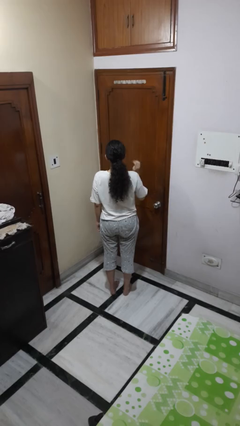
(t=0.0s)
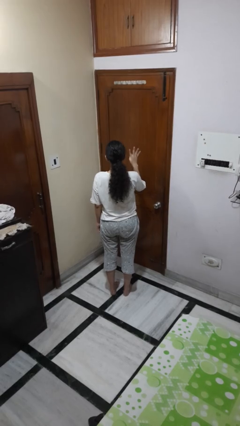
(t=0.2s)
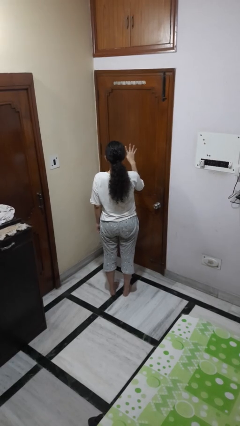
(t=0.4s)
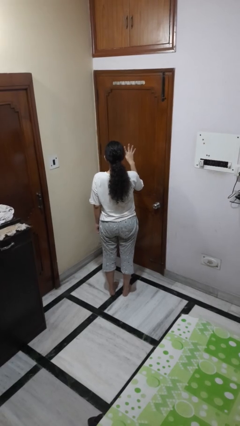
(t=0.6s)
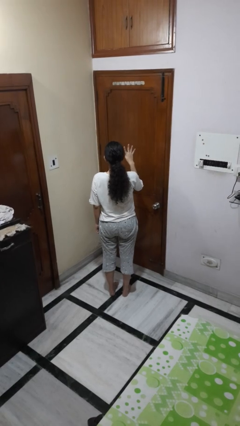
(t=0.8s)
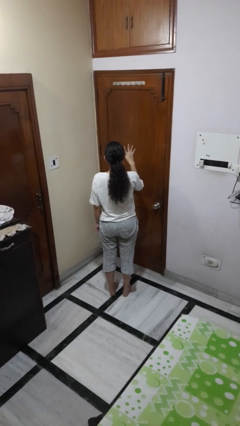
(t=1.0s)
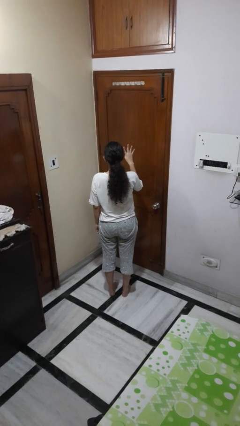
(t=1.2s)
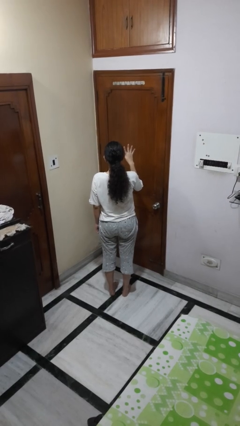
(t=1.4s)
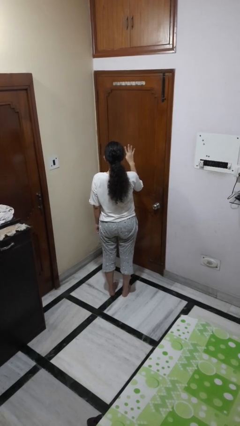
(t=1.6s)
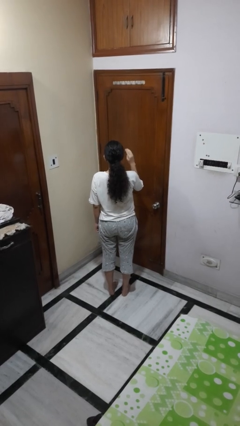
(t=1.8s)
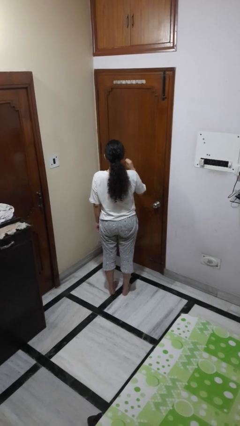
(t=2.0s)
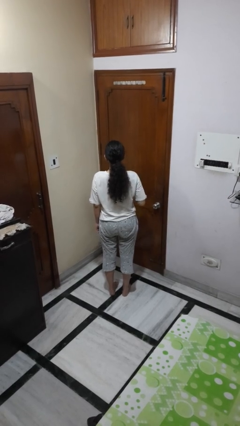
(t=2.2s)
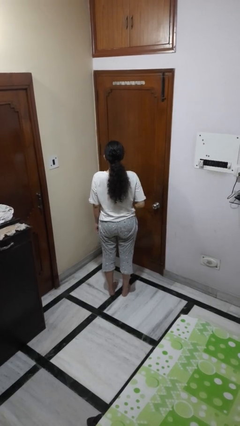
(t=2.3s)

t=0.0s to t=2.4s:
person gestures number four

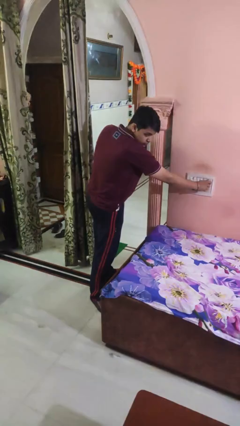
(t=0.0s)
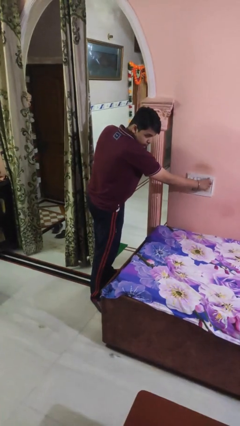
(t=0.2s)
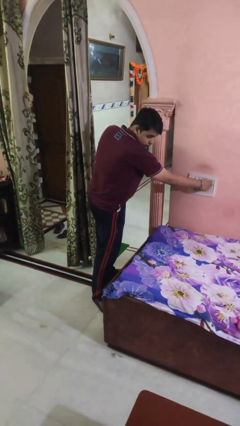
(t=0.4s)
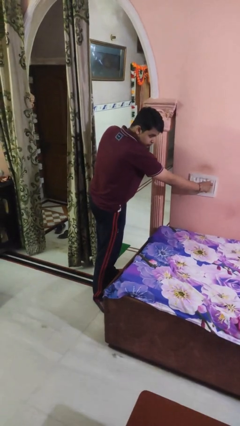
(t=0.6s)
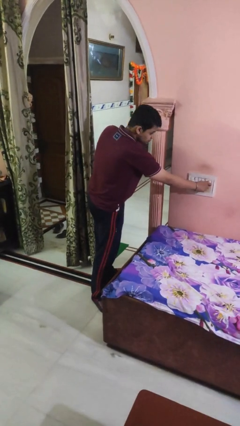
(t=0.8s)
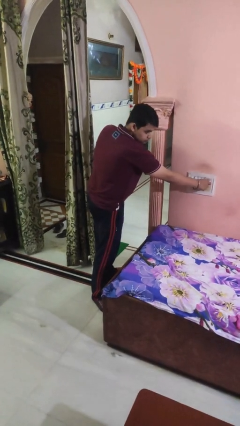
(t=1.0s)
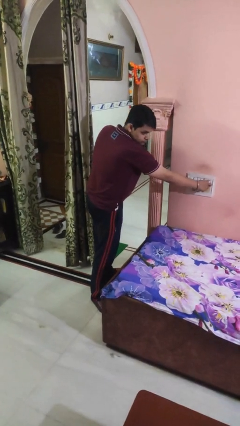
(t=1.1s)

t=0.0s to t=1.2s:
person adjusts thermostat

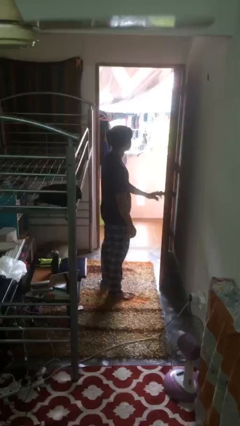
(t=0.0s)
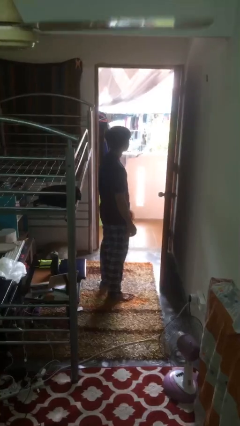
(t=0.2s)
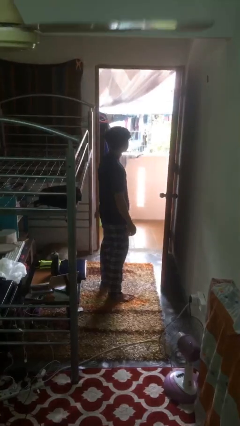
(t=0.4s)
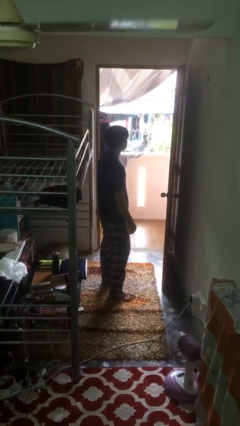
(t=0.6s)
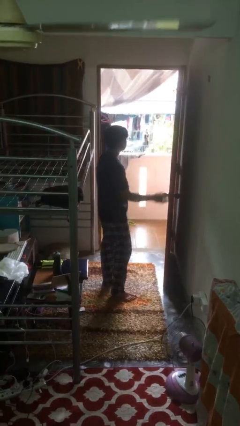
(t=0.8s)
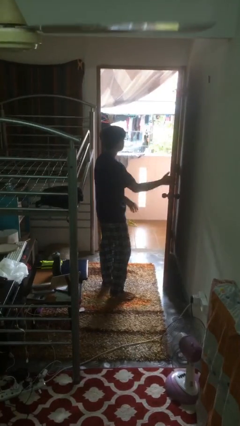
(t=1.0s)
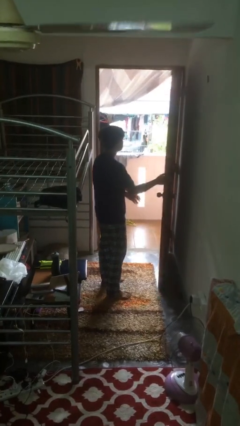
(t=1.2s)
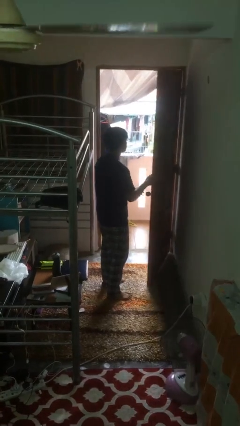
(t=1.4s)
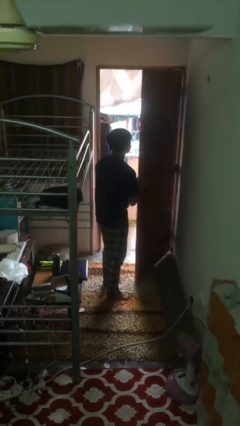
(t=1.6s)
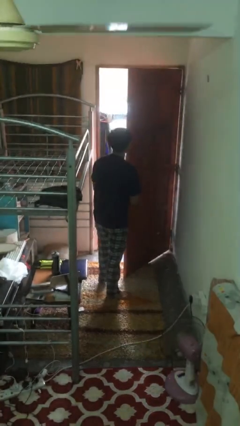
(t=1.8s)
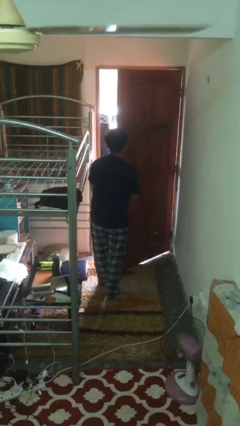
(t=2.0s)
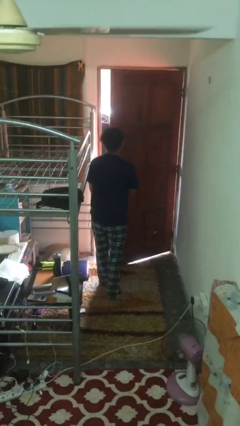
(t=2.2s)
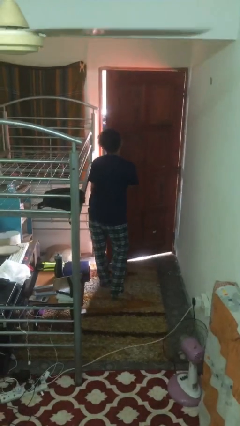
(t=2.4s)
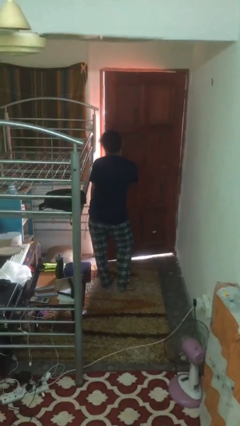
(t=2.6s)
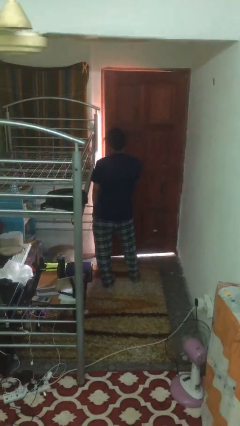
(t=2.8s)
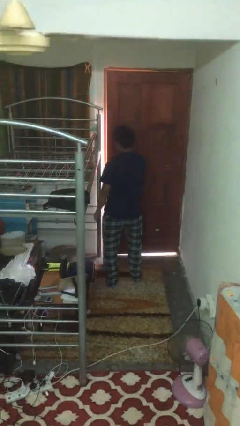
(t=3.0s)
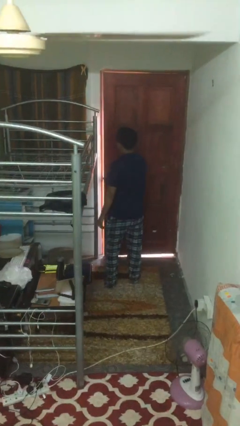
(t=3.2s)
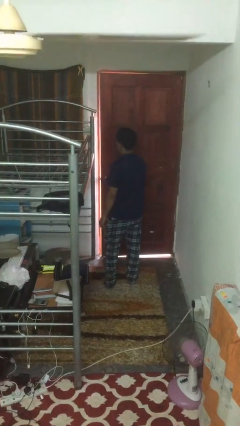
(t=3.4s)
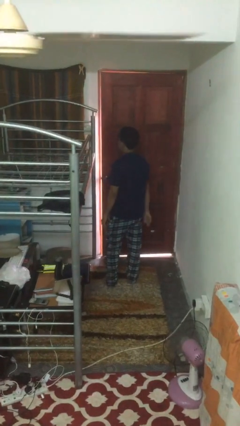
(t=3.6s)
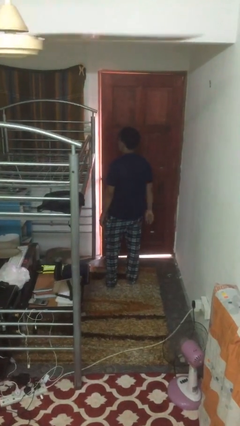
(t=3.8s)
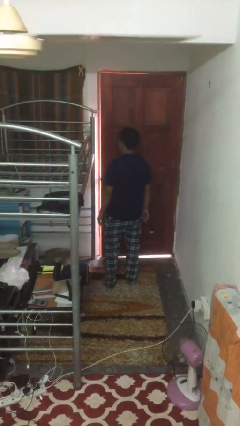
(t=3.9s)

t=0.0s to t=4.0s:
person closes facility door

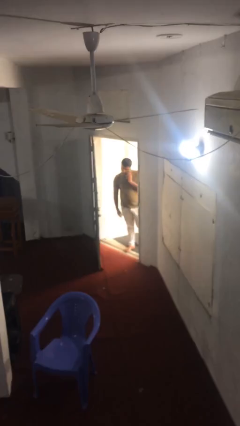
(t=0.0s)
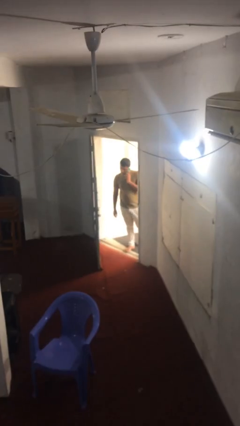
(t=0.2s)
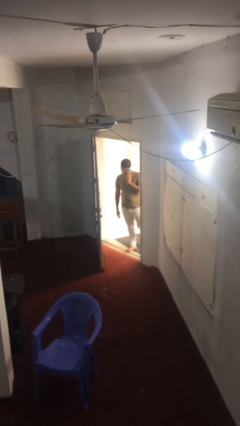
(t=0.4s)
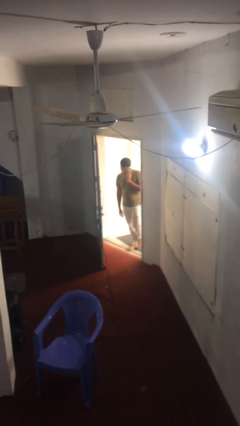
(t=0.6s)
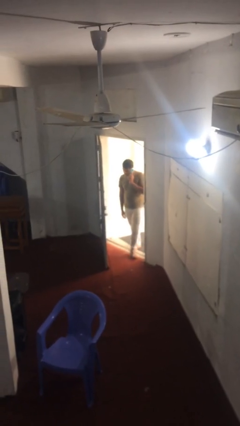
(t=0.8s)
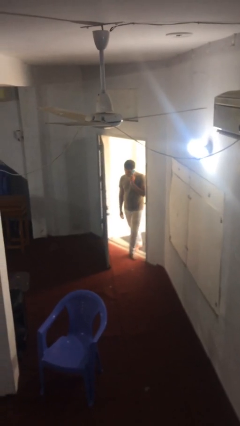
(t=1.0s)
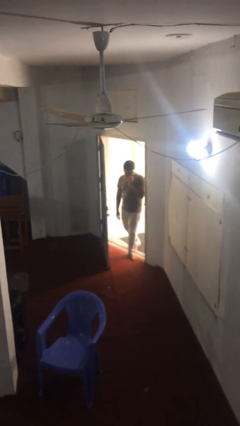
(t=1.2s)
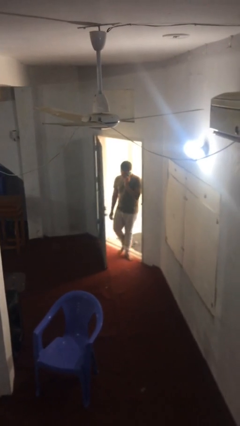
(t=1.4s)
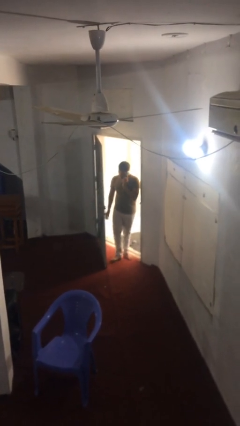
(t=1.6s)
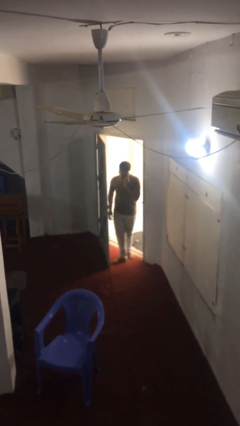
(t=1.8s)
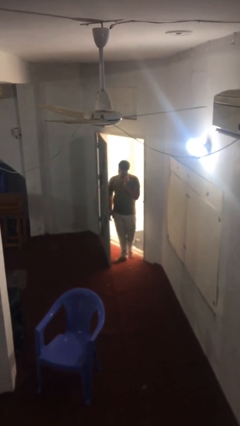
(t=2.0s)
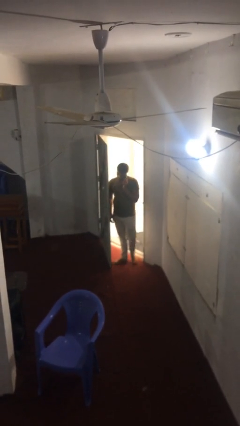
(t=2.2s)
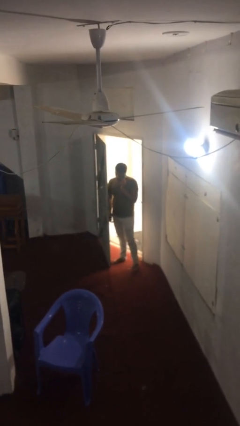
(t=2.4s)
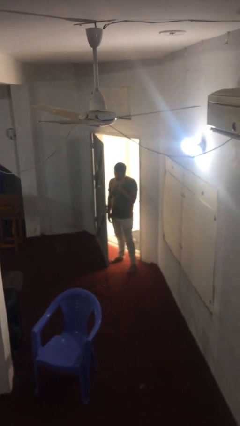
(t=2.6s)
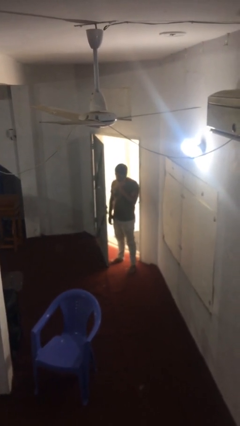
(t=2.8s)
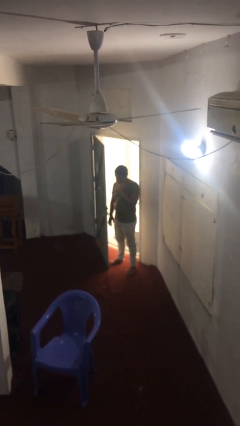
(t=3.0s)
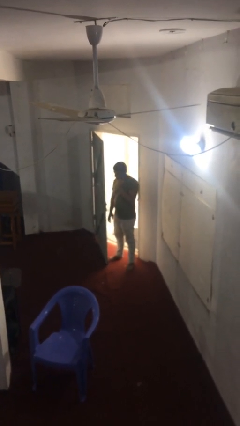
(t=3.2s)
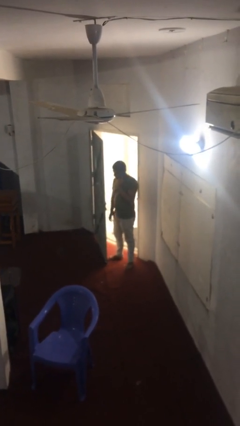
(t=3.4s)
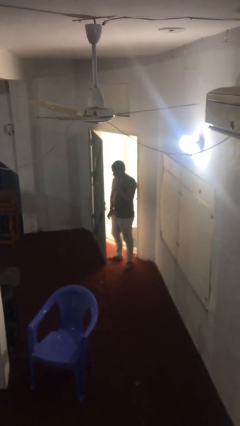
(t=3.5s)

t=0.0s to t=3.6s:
person enters scene through structure

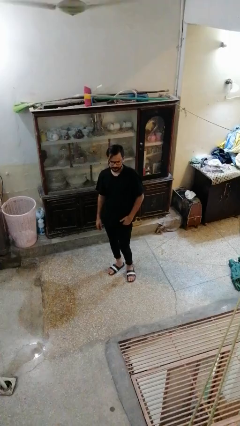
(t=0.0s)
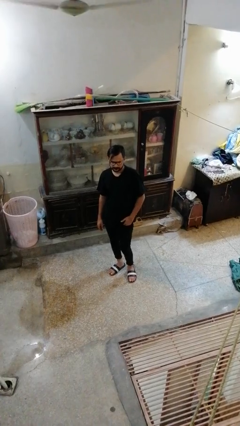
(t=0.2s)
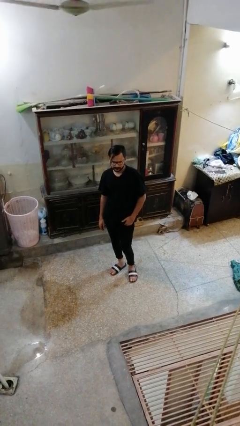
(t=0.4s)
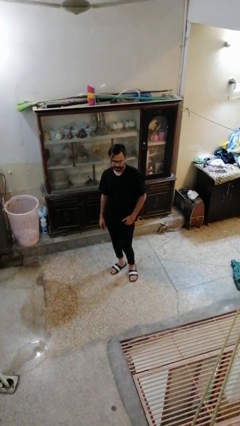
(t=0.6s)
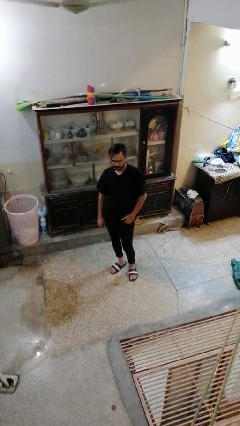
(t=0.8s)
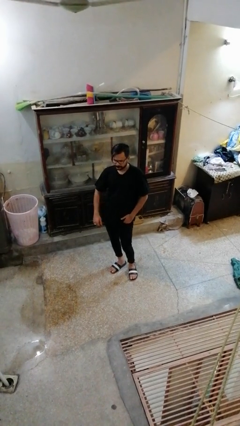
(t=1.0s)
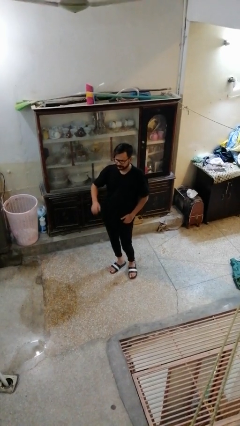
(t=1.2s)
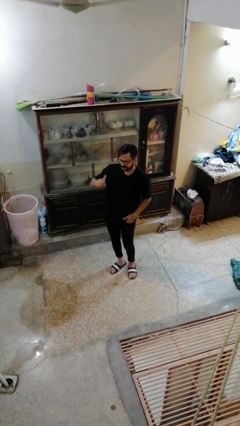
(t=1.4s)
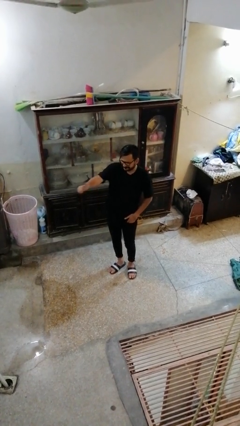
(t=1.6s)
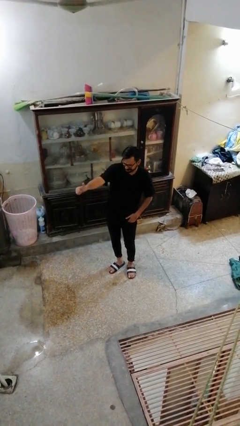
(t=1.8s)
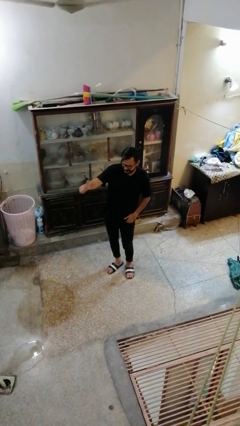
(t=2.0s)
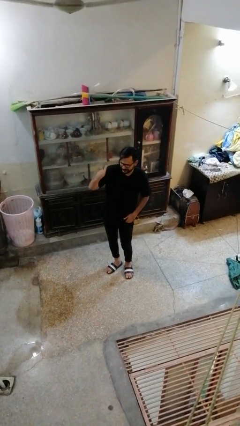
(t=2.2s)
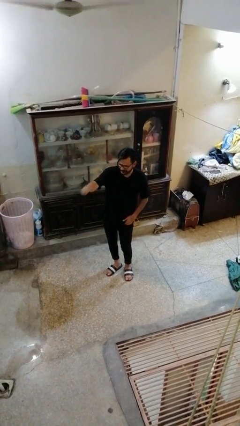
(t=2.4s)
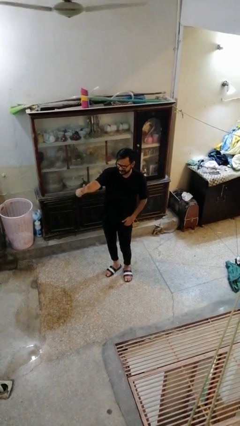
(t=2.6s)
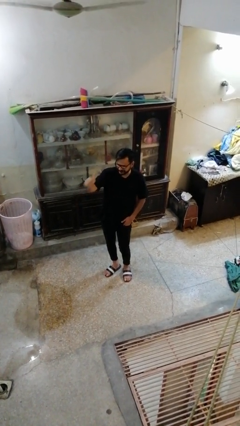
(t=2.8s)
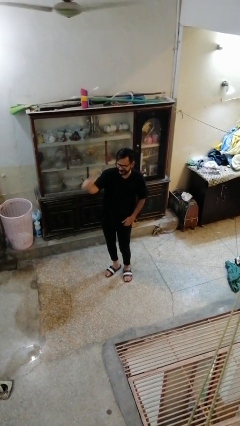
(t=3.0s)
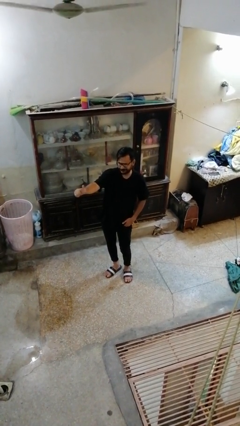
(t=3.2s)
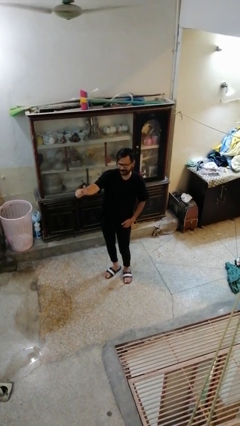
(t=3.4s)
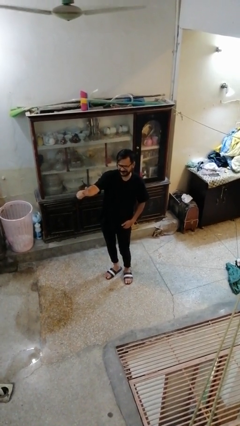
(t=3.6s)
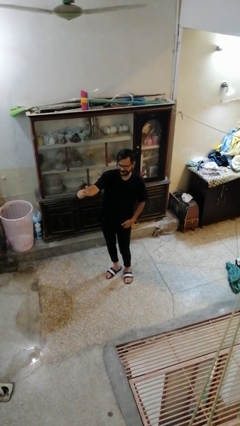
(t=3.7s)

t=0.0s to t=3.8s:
person gestures thumbs up

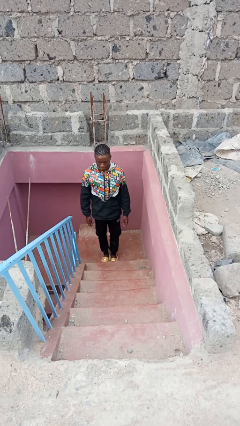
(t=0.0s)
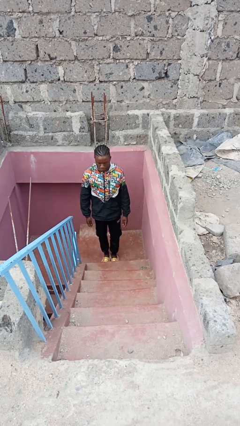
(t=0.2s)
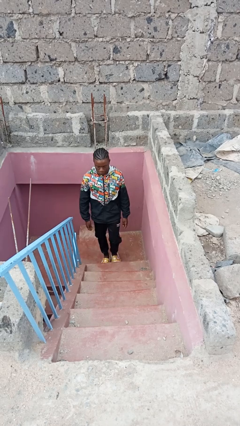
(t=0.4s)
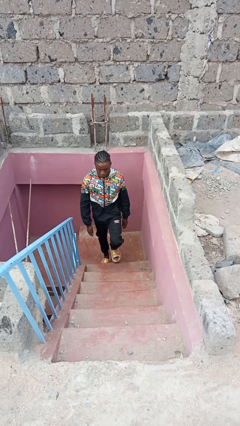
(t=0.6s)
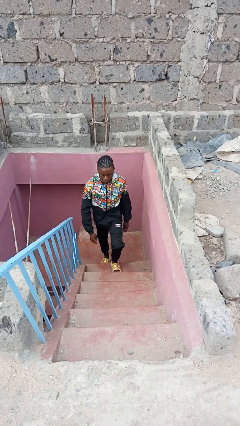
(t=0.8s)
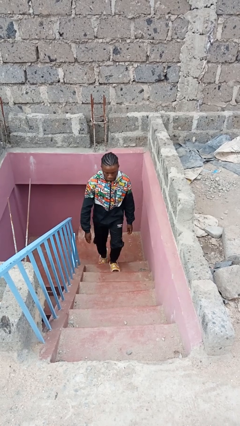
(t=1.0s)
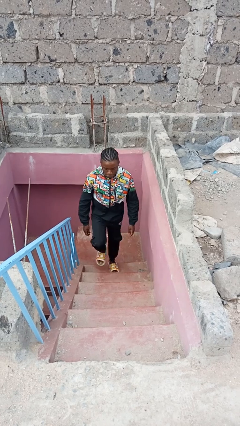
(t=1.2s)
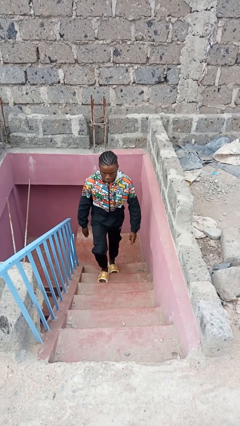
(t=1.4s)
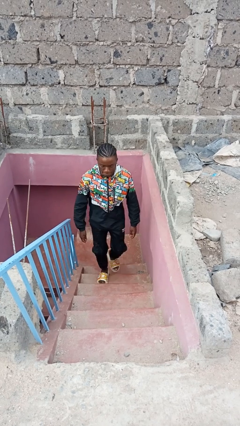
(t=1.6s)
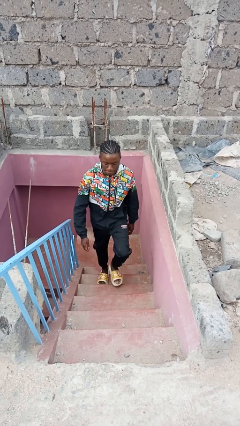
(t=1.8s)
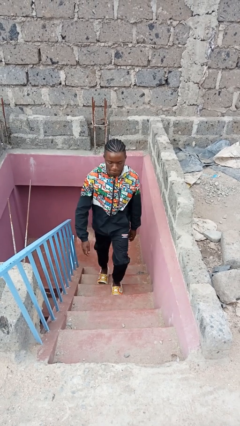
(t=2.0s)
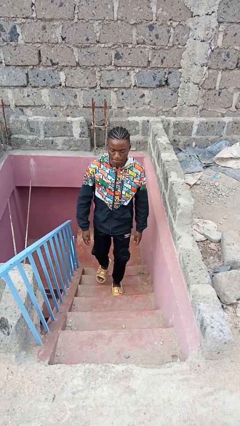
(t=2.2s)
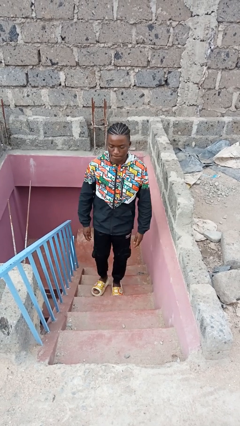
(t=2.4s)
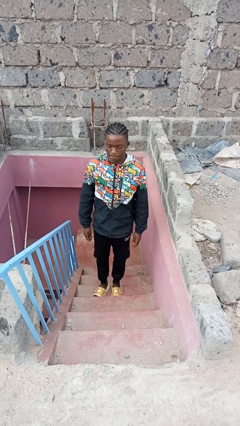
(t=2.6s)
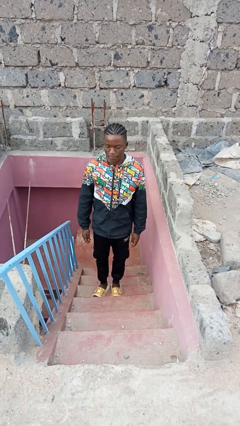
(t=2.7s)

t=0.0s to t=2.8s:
person climbs up stairs
